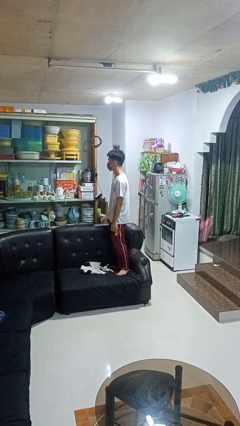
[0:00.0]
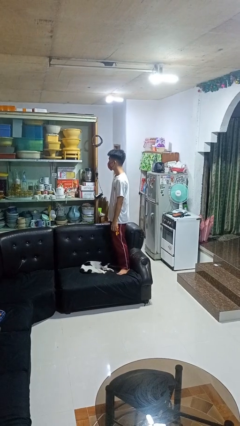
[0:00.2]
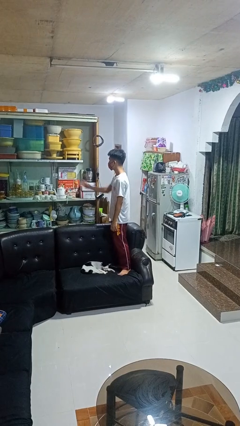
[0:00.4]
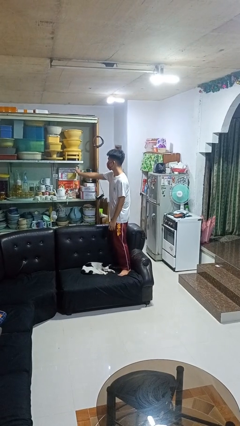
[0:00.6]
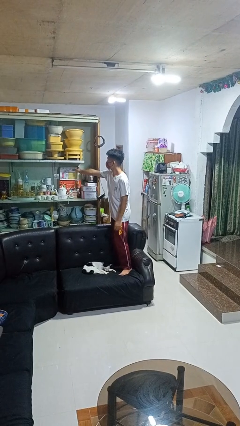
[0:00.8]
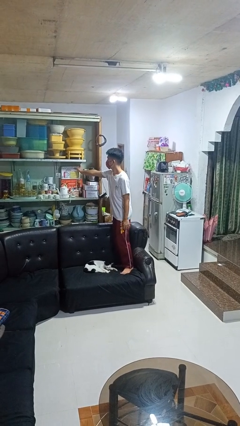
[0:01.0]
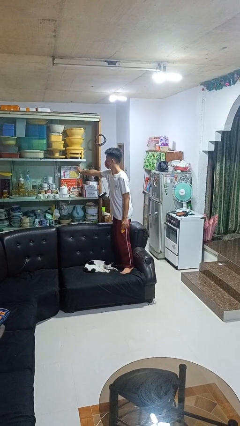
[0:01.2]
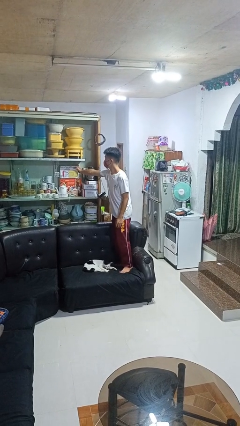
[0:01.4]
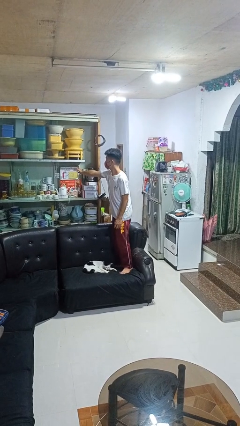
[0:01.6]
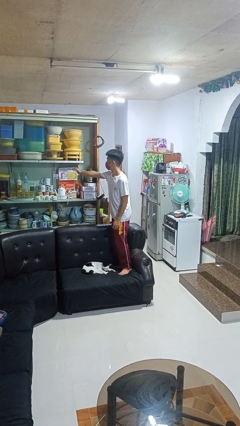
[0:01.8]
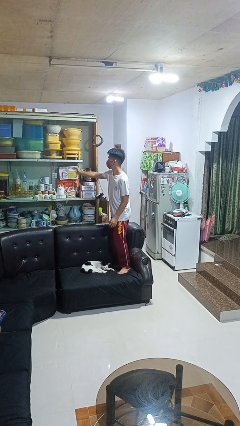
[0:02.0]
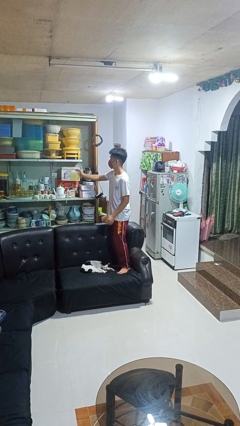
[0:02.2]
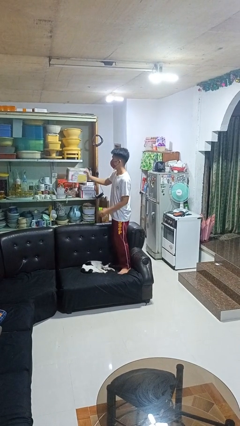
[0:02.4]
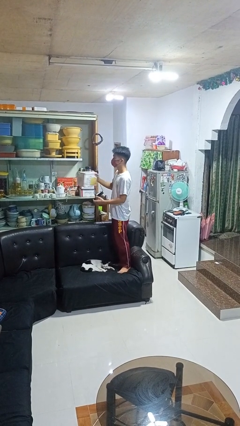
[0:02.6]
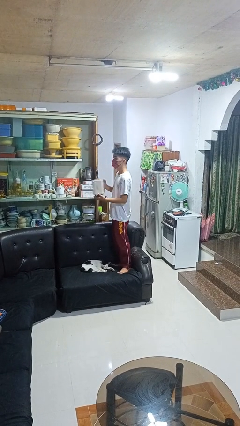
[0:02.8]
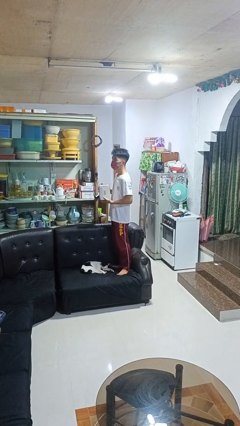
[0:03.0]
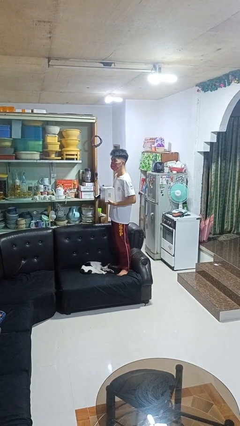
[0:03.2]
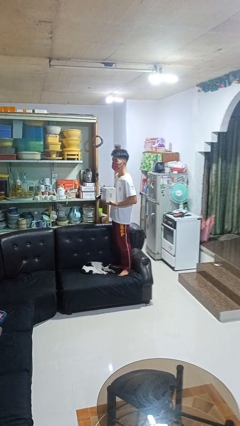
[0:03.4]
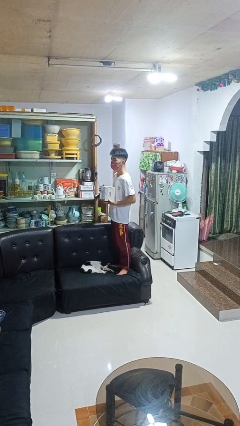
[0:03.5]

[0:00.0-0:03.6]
person picks up object from cabinet

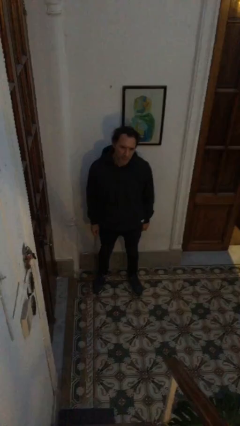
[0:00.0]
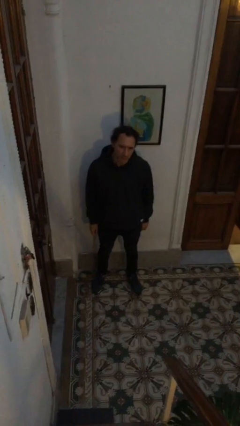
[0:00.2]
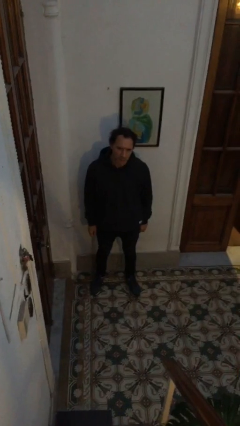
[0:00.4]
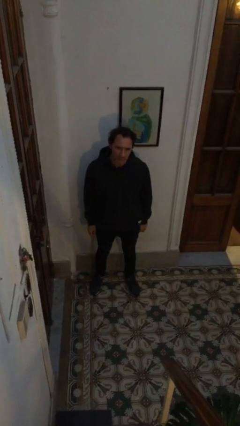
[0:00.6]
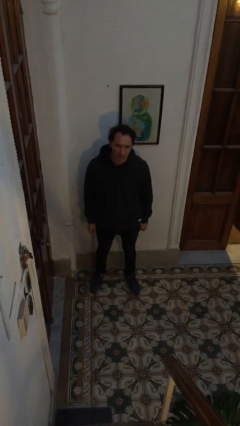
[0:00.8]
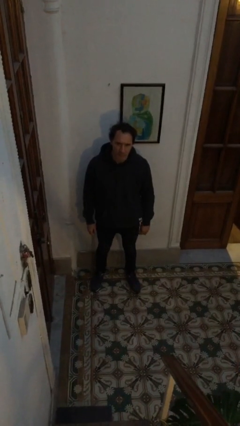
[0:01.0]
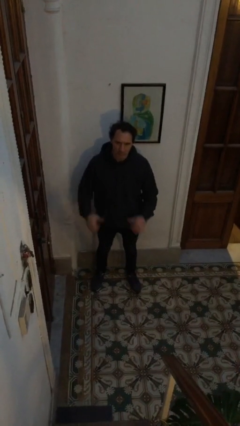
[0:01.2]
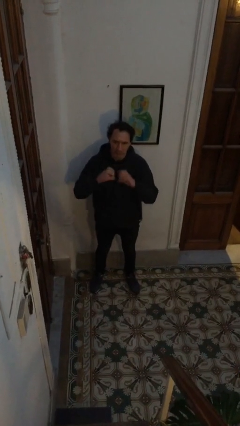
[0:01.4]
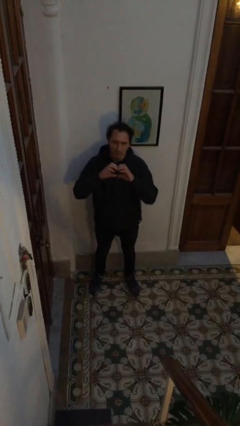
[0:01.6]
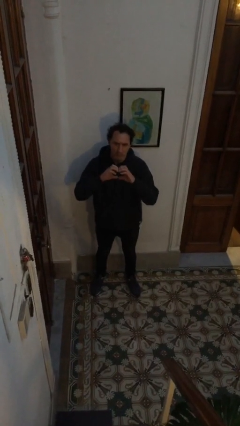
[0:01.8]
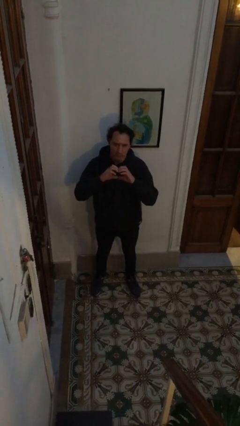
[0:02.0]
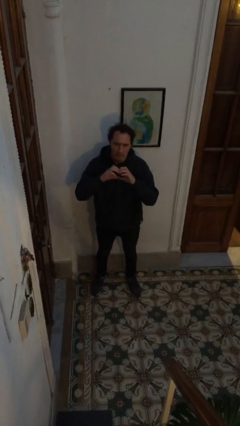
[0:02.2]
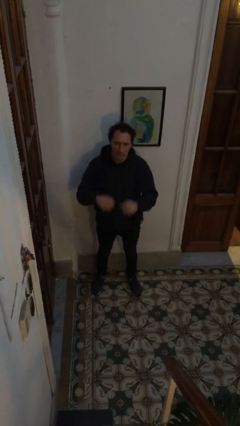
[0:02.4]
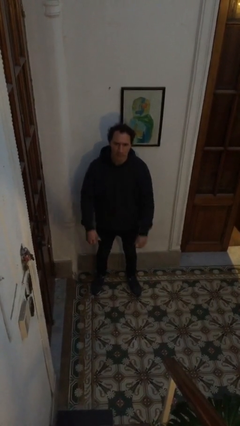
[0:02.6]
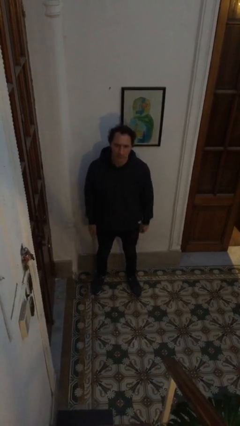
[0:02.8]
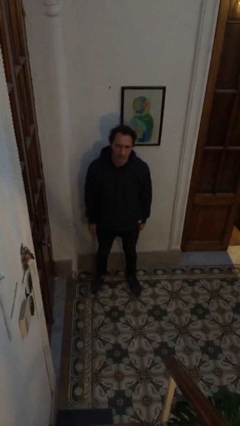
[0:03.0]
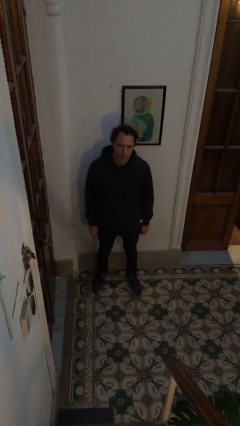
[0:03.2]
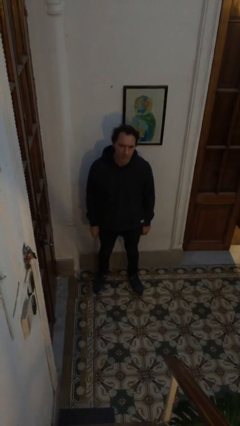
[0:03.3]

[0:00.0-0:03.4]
person gestures heart

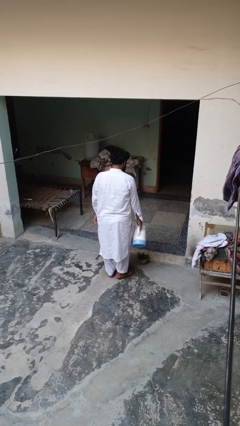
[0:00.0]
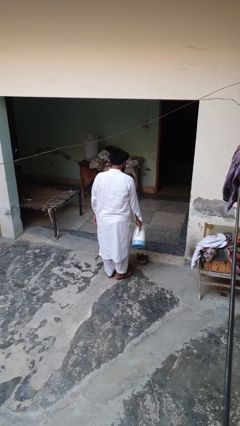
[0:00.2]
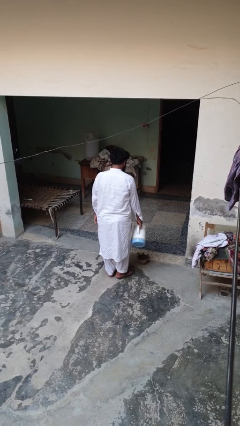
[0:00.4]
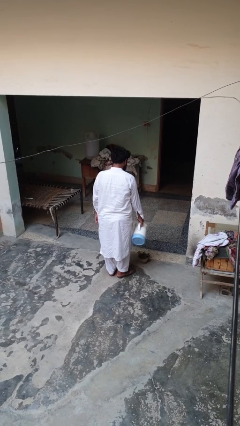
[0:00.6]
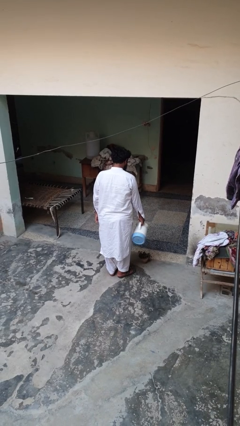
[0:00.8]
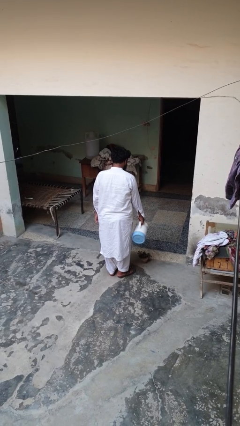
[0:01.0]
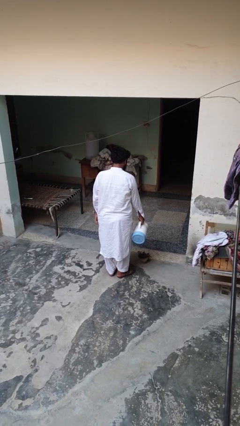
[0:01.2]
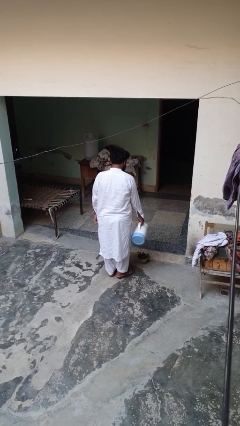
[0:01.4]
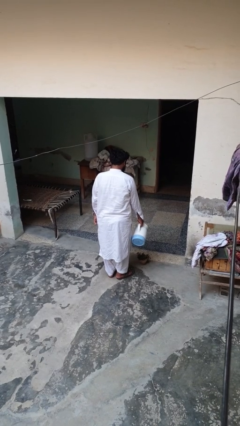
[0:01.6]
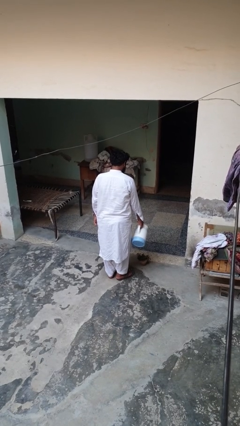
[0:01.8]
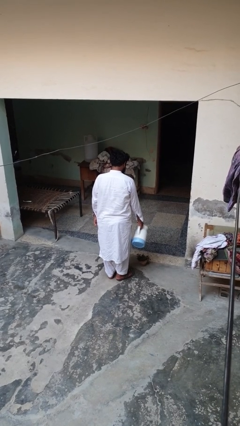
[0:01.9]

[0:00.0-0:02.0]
person waters houseplant

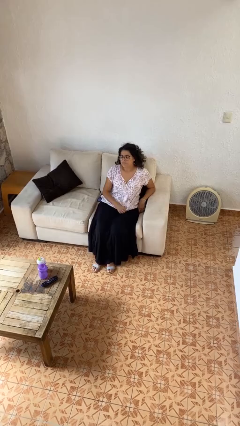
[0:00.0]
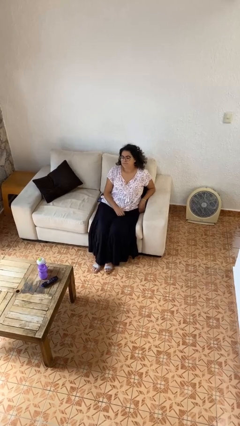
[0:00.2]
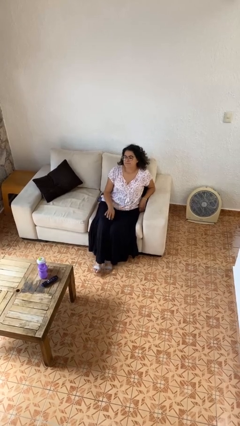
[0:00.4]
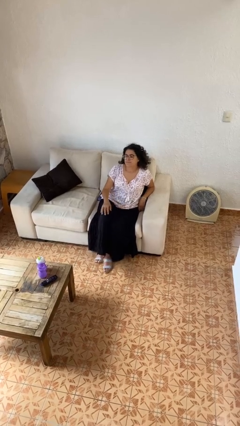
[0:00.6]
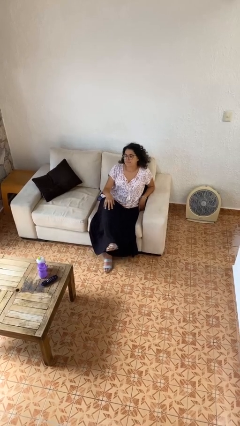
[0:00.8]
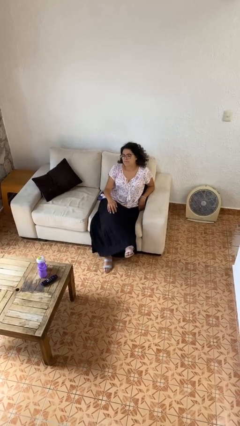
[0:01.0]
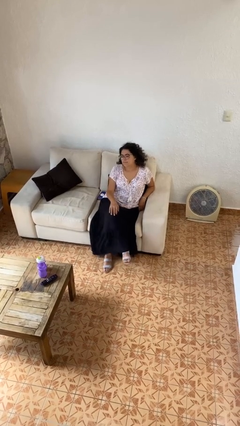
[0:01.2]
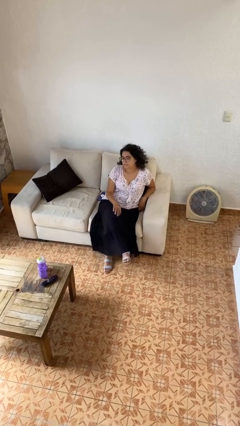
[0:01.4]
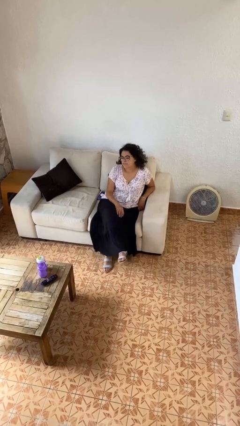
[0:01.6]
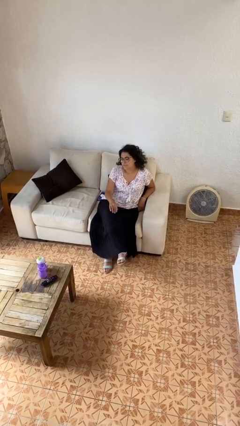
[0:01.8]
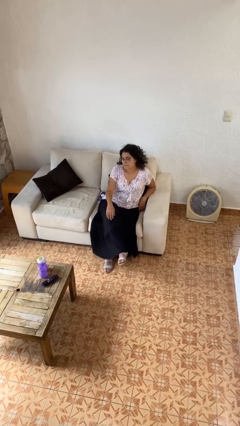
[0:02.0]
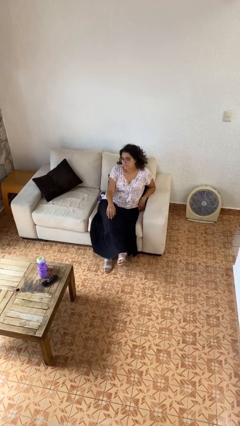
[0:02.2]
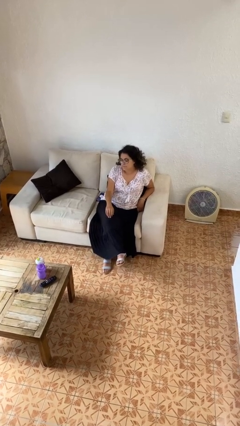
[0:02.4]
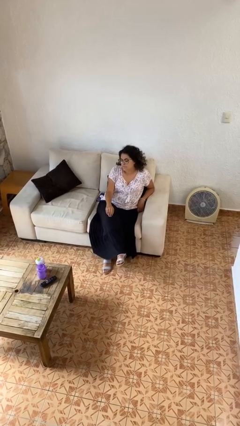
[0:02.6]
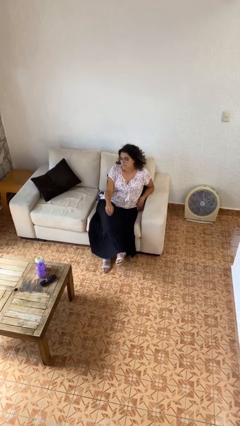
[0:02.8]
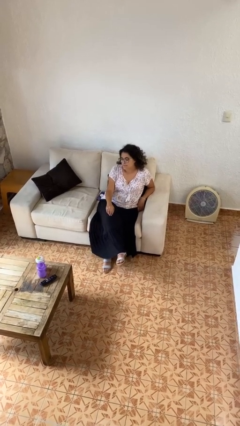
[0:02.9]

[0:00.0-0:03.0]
person crosses legs

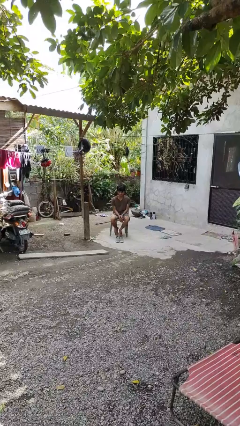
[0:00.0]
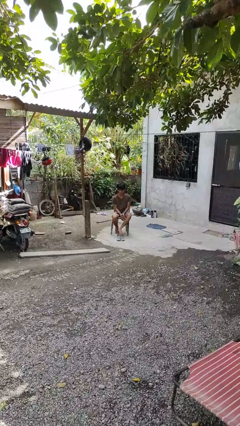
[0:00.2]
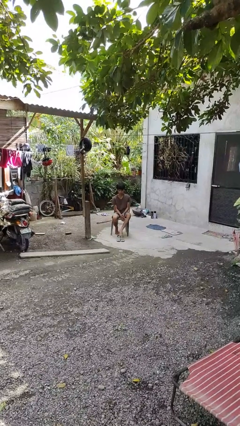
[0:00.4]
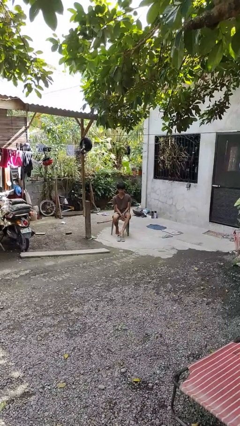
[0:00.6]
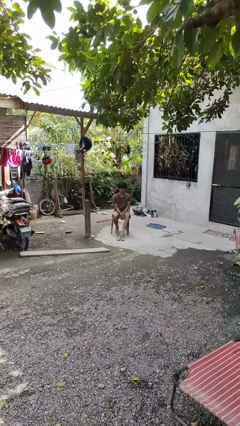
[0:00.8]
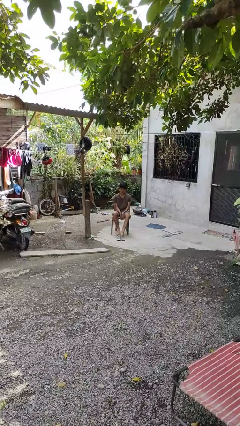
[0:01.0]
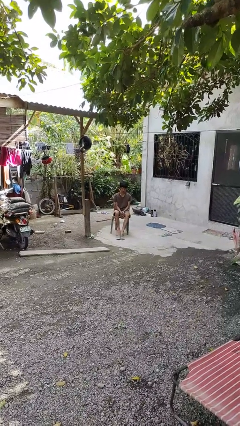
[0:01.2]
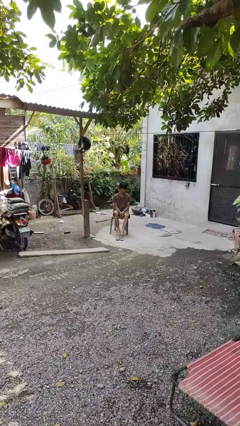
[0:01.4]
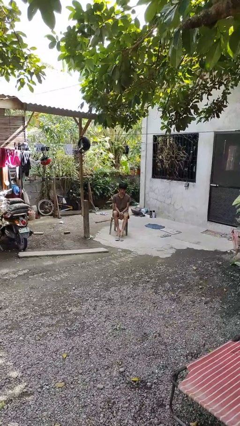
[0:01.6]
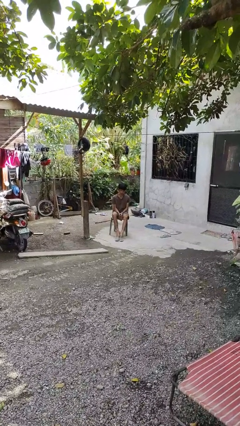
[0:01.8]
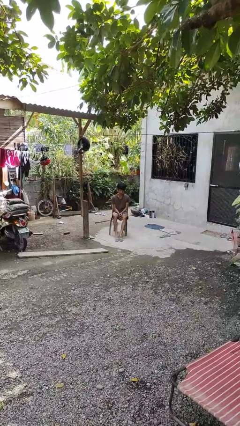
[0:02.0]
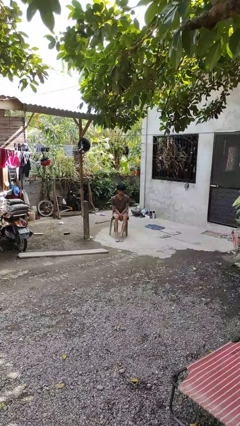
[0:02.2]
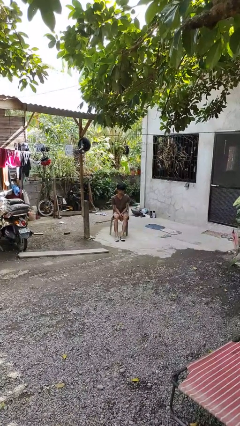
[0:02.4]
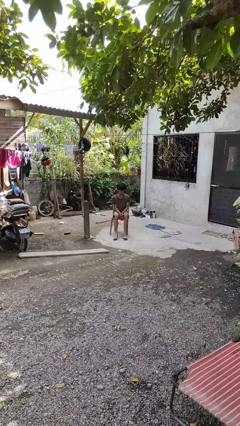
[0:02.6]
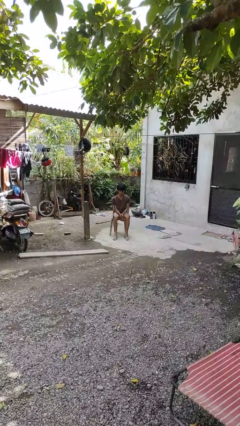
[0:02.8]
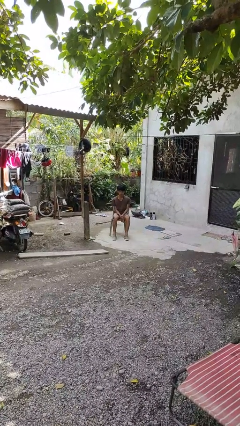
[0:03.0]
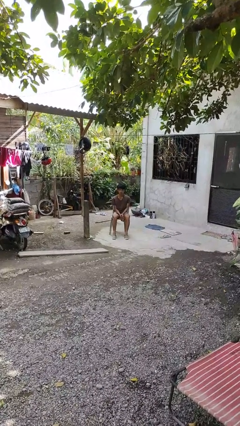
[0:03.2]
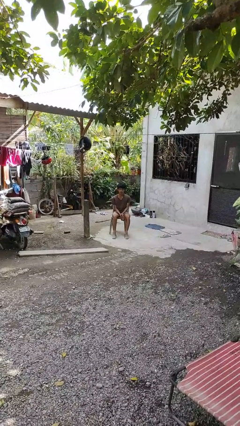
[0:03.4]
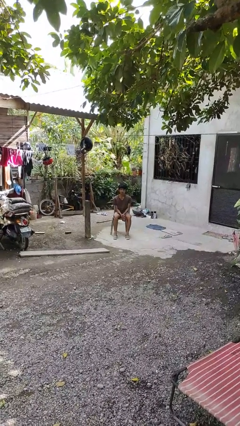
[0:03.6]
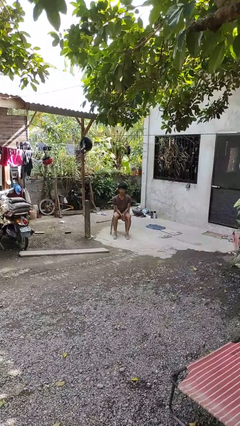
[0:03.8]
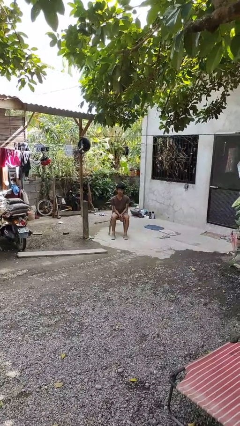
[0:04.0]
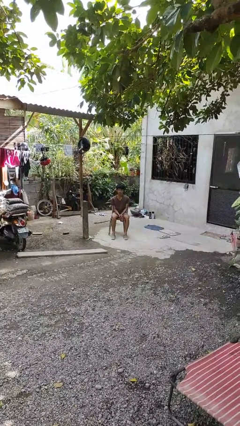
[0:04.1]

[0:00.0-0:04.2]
person puts on shoes

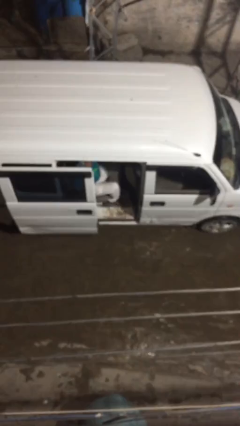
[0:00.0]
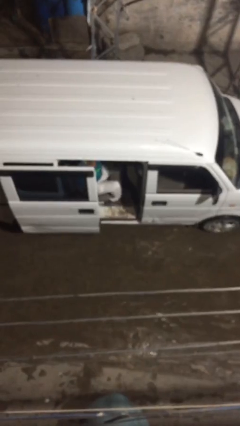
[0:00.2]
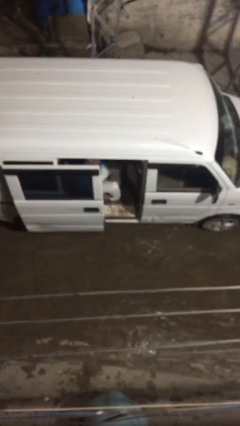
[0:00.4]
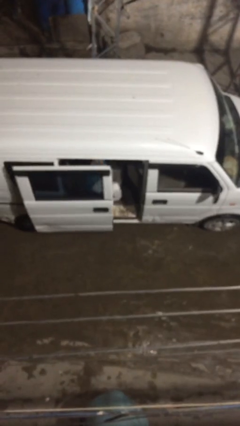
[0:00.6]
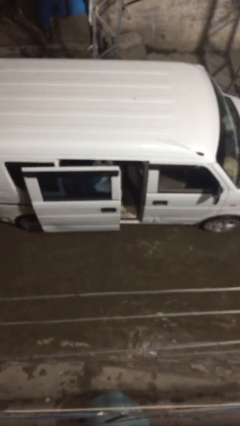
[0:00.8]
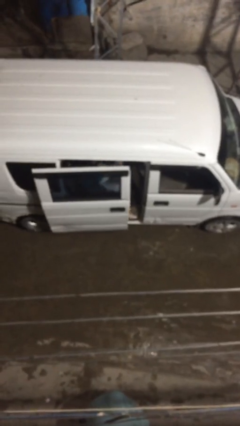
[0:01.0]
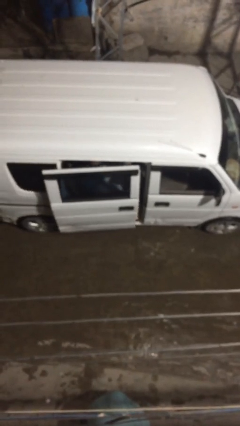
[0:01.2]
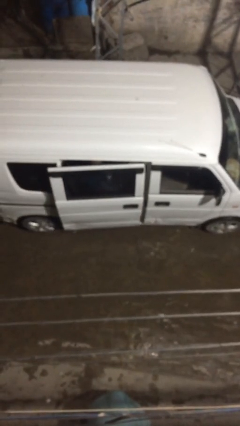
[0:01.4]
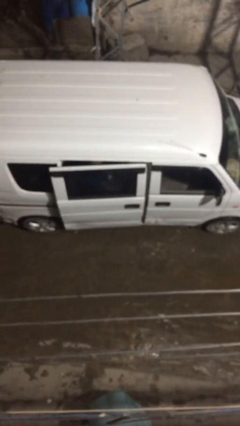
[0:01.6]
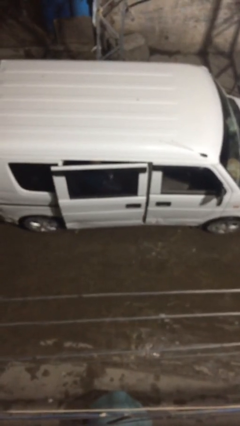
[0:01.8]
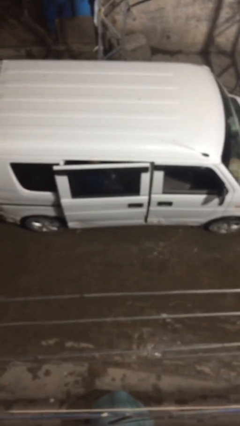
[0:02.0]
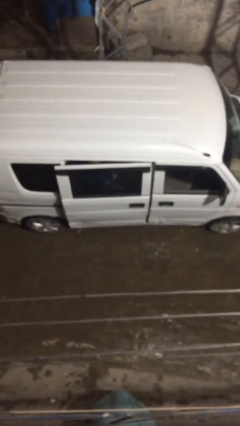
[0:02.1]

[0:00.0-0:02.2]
person closes car door
